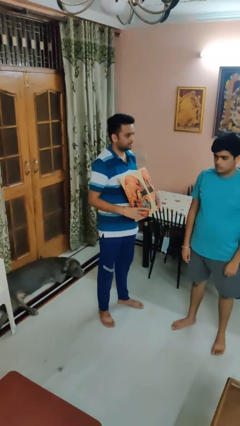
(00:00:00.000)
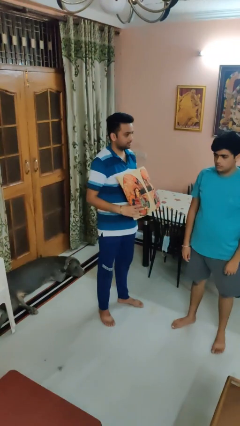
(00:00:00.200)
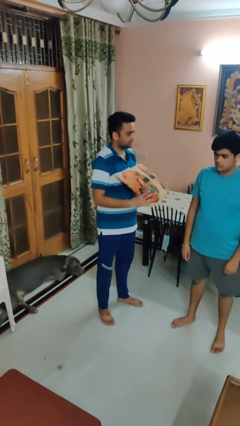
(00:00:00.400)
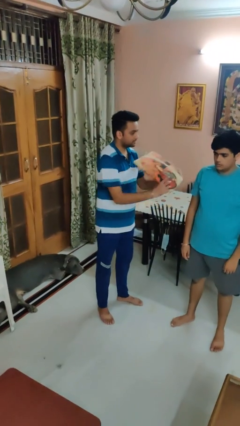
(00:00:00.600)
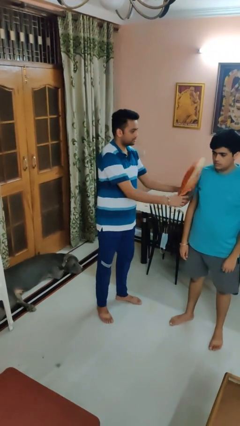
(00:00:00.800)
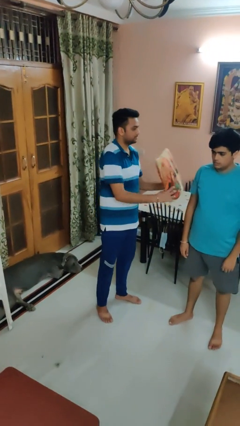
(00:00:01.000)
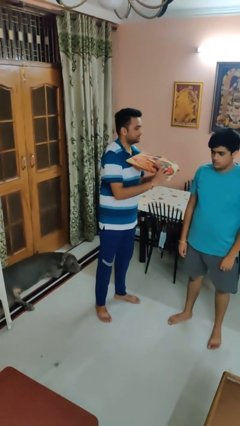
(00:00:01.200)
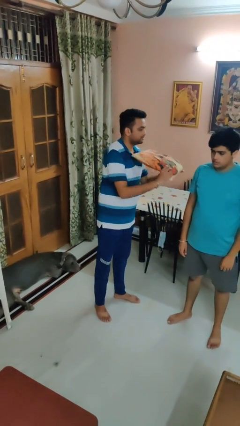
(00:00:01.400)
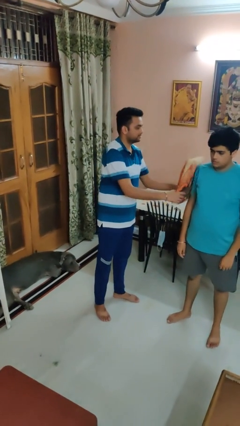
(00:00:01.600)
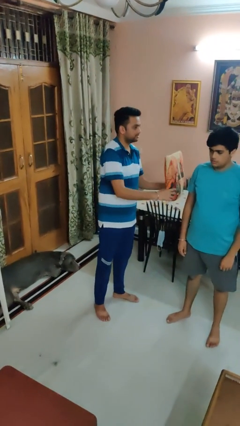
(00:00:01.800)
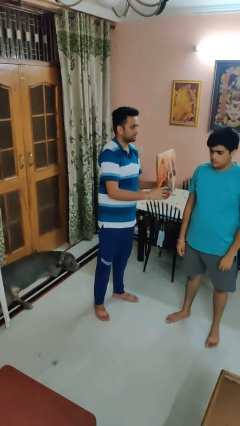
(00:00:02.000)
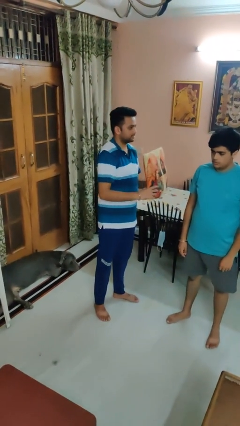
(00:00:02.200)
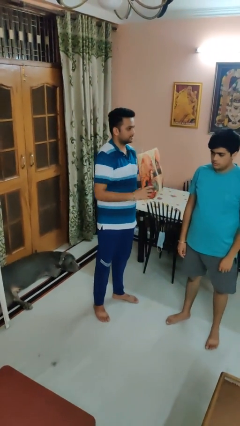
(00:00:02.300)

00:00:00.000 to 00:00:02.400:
person hits person with pillow

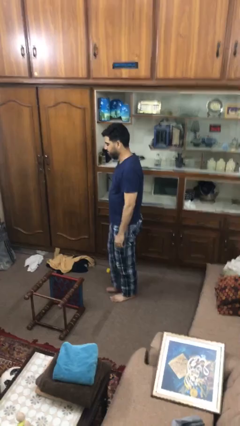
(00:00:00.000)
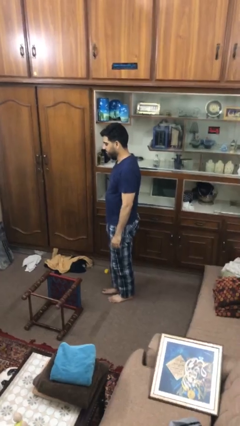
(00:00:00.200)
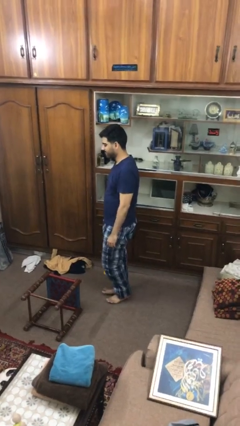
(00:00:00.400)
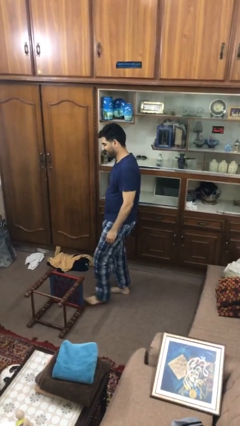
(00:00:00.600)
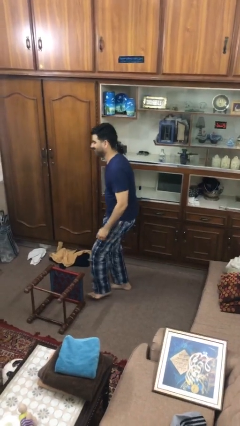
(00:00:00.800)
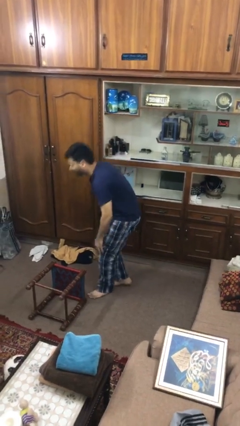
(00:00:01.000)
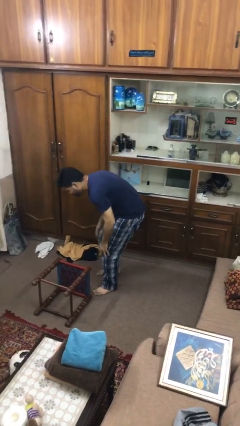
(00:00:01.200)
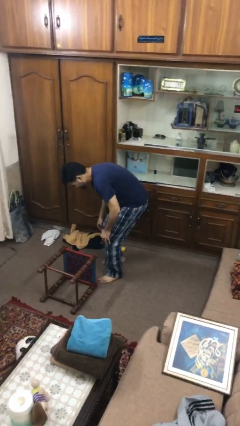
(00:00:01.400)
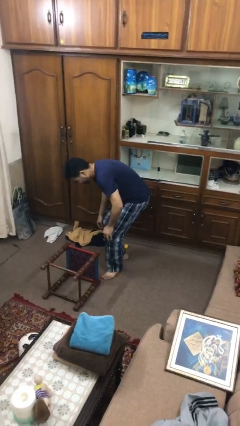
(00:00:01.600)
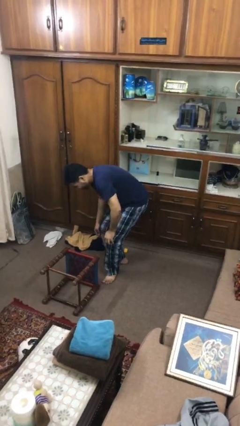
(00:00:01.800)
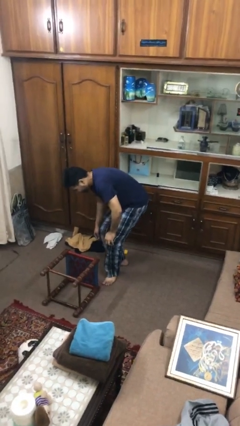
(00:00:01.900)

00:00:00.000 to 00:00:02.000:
person trips on object on floor

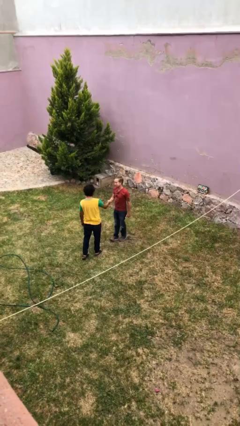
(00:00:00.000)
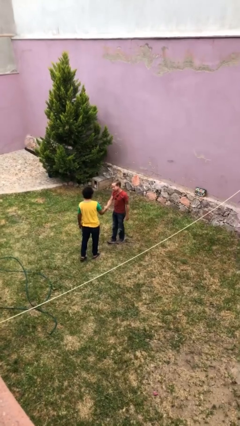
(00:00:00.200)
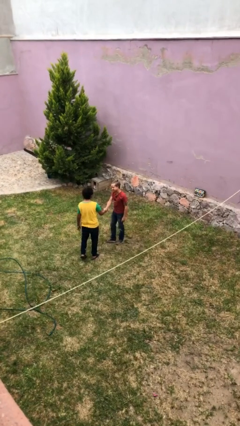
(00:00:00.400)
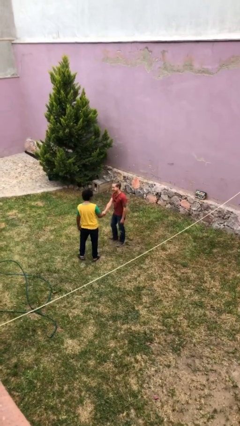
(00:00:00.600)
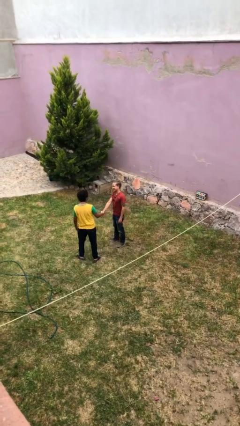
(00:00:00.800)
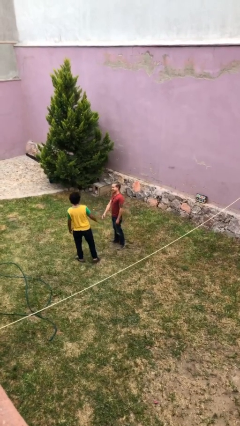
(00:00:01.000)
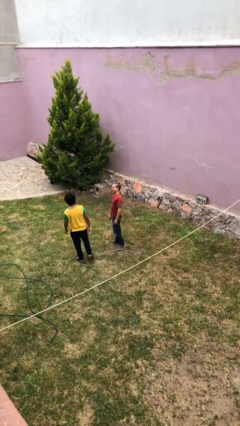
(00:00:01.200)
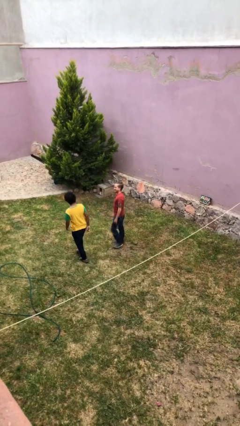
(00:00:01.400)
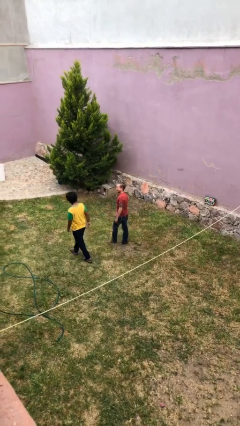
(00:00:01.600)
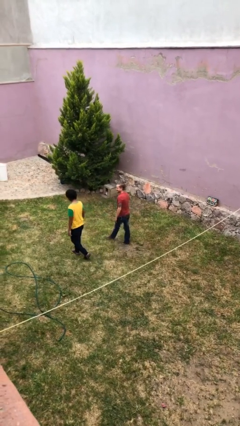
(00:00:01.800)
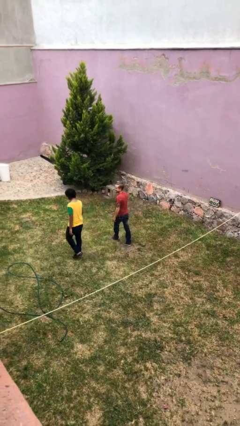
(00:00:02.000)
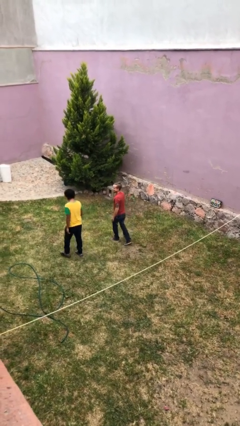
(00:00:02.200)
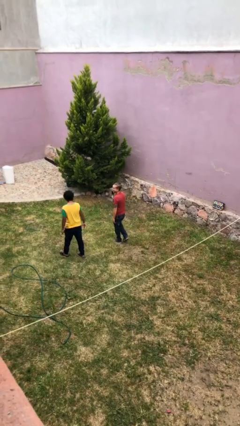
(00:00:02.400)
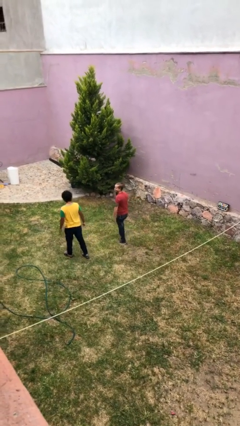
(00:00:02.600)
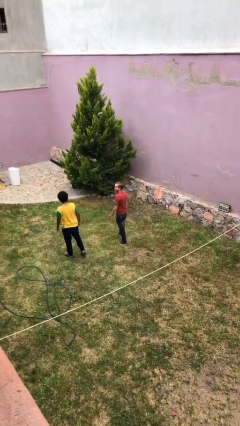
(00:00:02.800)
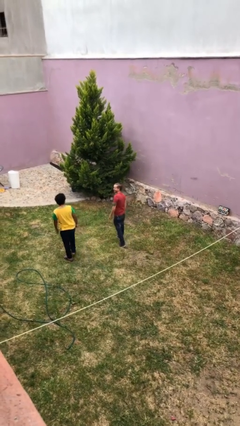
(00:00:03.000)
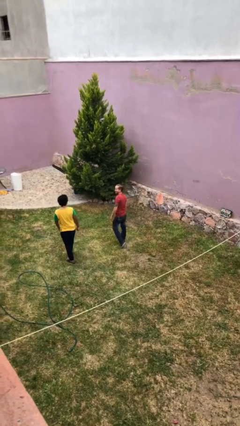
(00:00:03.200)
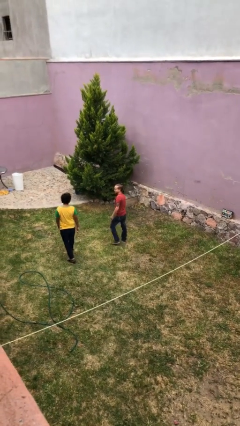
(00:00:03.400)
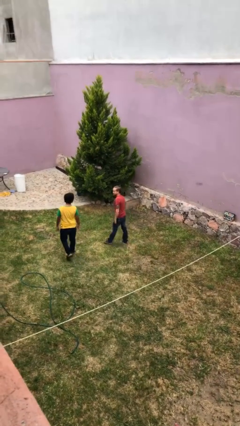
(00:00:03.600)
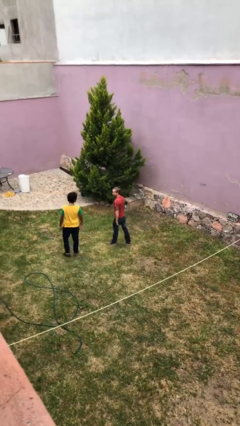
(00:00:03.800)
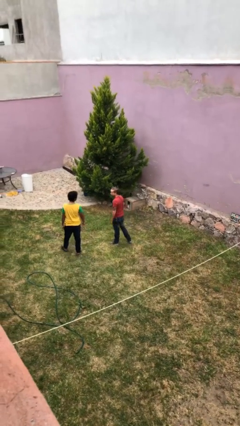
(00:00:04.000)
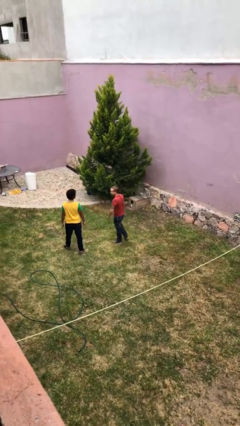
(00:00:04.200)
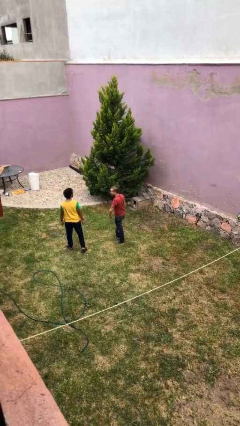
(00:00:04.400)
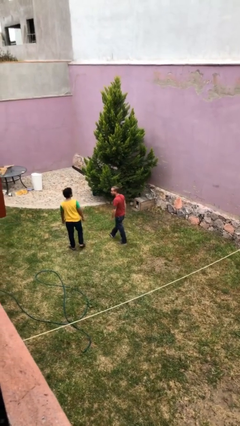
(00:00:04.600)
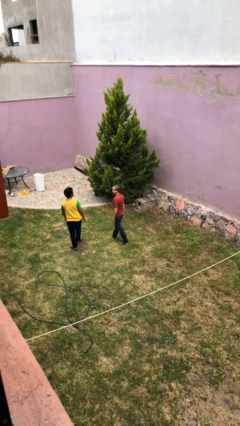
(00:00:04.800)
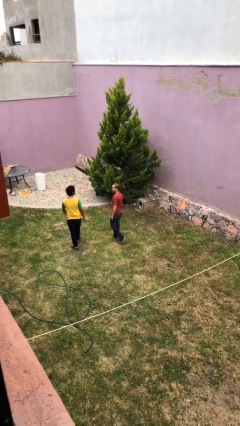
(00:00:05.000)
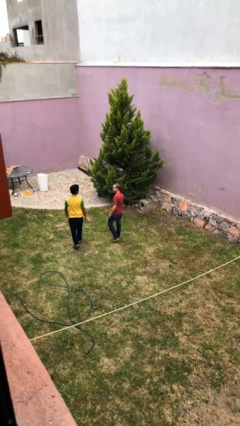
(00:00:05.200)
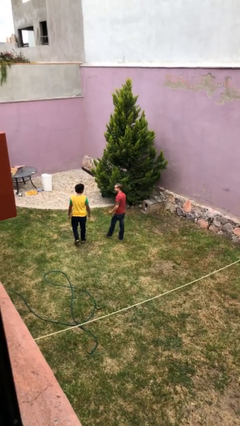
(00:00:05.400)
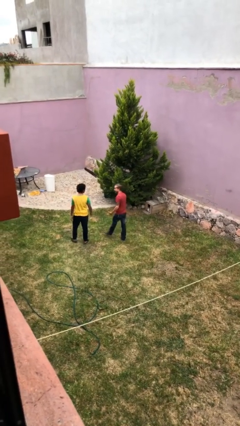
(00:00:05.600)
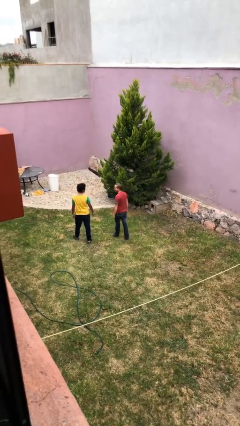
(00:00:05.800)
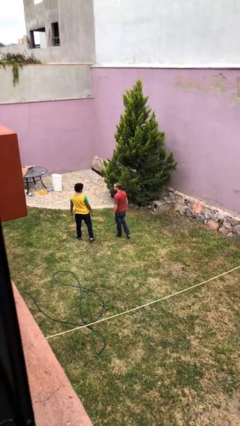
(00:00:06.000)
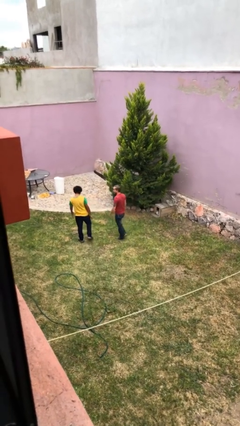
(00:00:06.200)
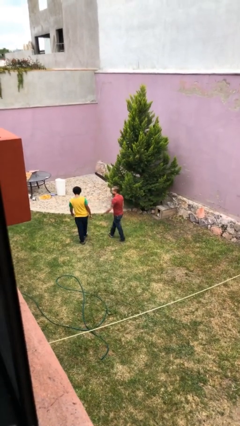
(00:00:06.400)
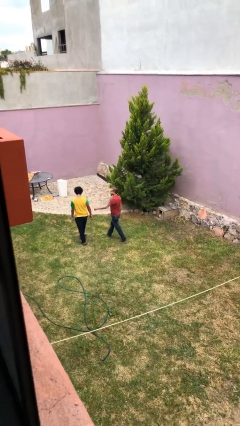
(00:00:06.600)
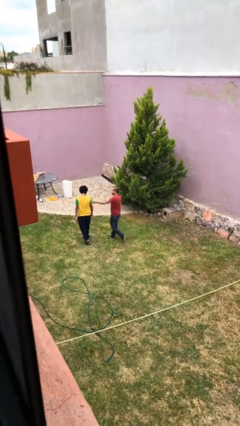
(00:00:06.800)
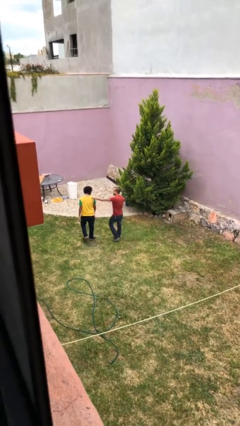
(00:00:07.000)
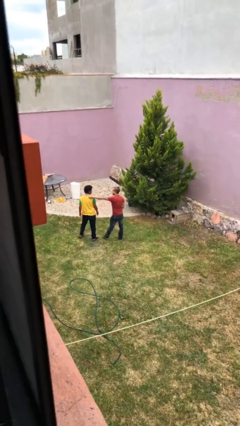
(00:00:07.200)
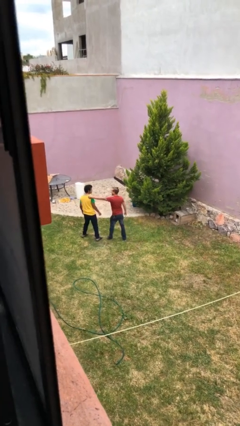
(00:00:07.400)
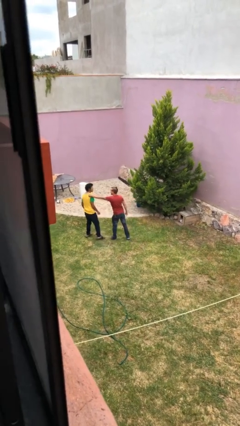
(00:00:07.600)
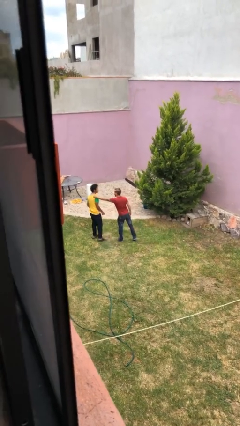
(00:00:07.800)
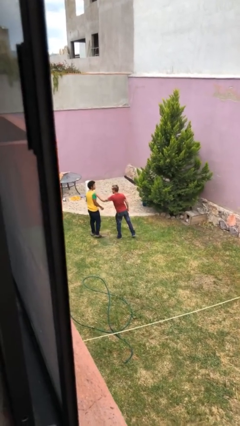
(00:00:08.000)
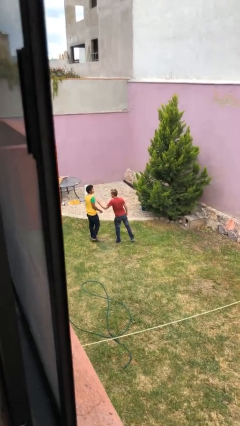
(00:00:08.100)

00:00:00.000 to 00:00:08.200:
person talks to person

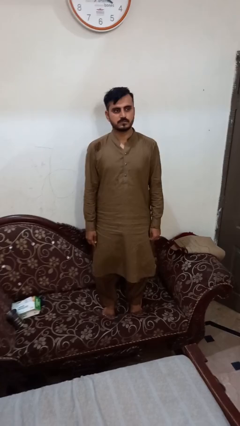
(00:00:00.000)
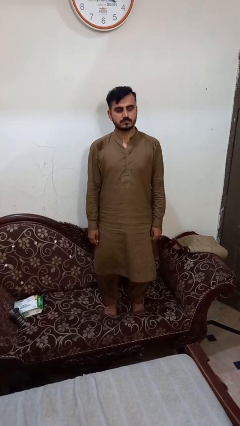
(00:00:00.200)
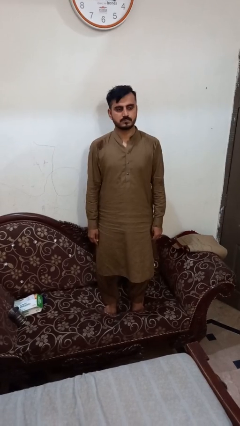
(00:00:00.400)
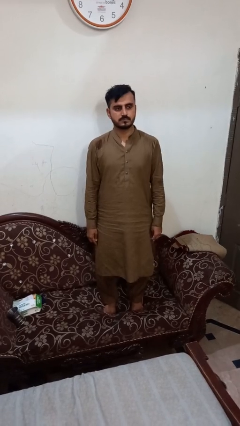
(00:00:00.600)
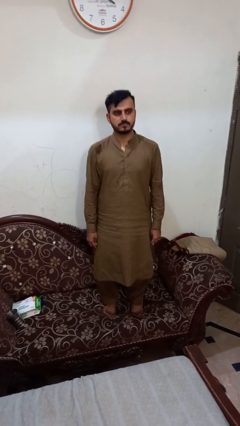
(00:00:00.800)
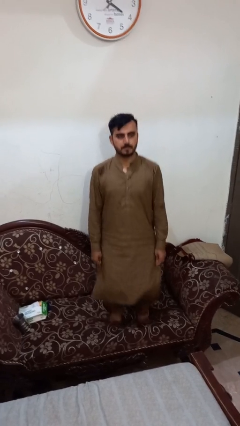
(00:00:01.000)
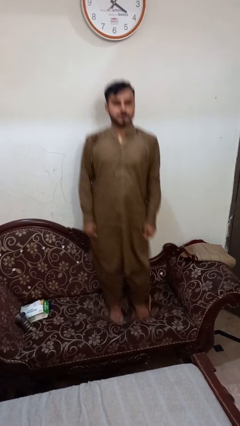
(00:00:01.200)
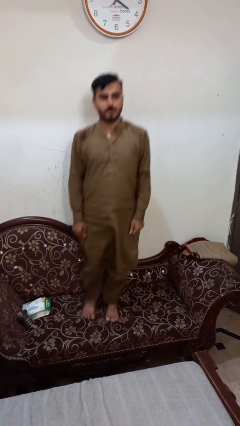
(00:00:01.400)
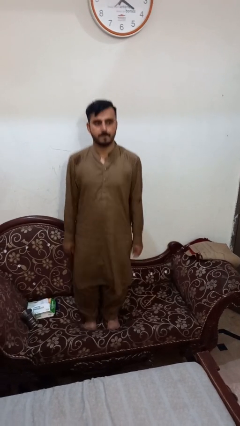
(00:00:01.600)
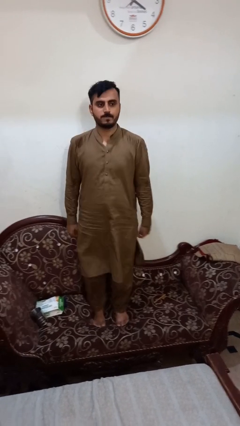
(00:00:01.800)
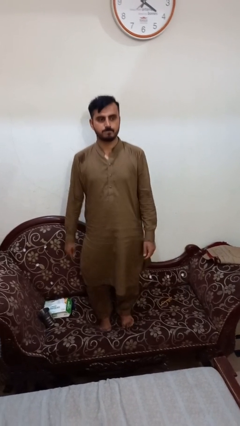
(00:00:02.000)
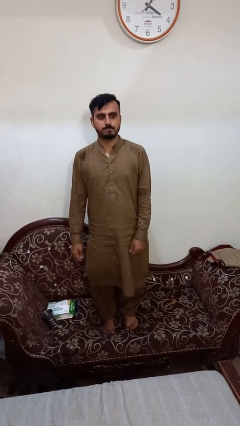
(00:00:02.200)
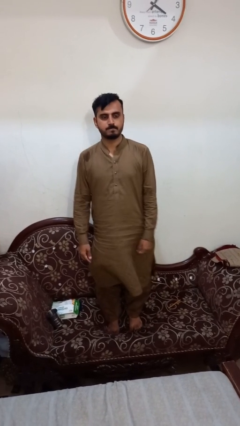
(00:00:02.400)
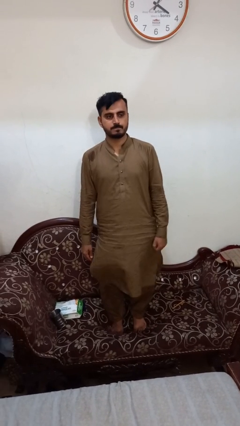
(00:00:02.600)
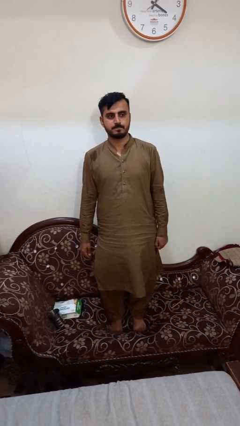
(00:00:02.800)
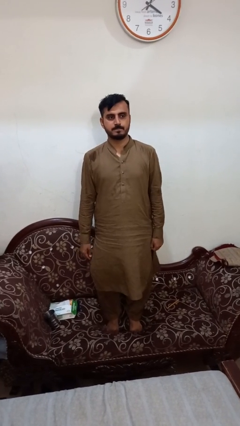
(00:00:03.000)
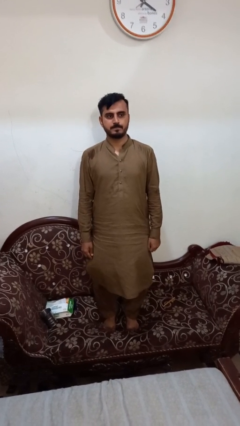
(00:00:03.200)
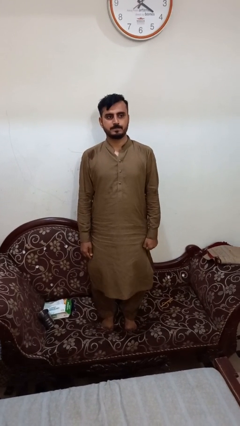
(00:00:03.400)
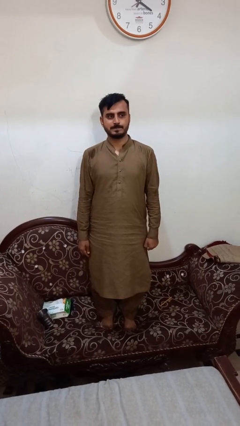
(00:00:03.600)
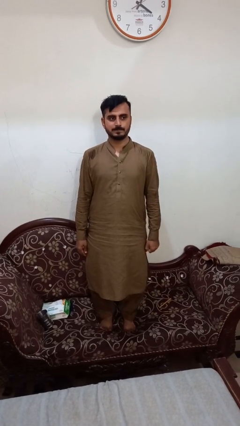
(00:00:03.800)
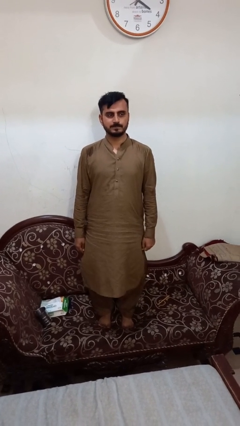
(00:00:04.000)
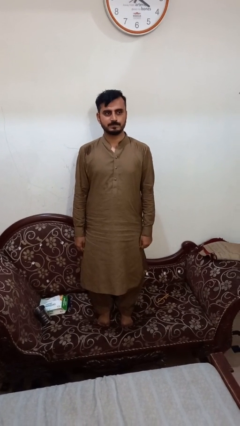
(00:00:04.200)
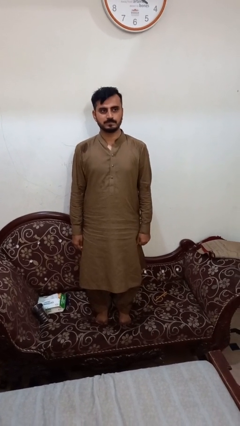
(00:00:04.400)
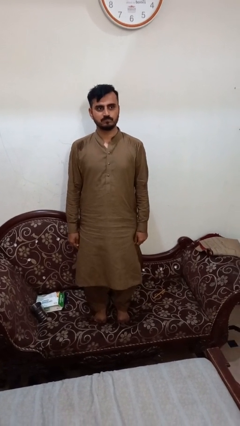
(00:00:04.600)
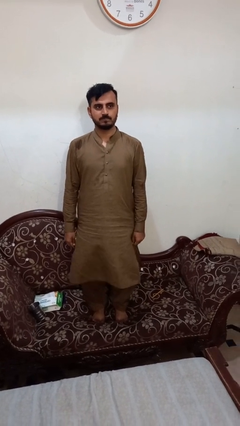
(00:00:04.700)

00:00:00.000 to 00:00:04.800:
person jumps on couch
